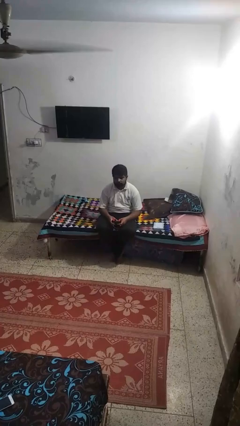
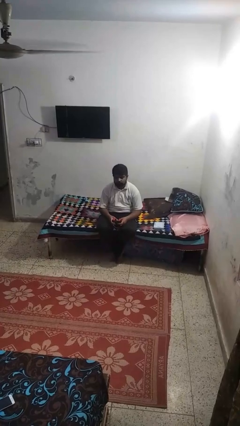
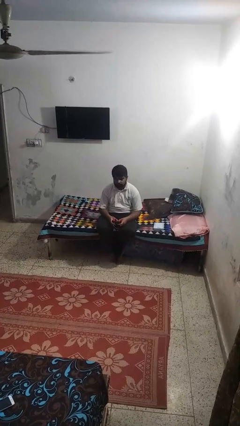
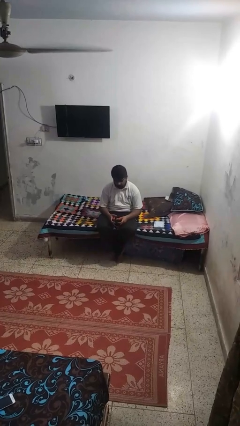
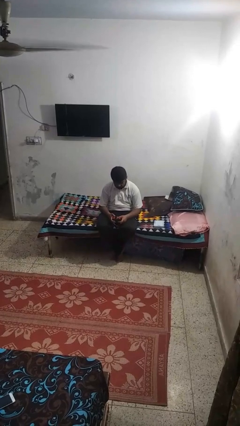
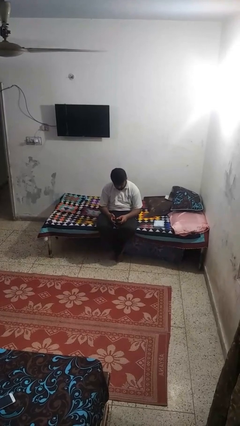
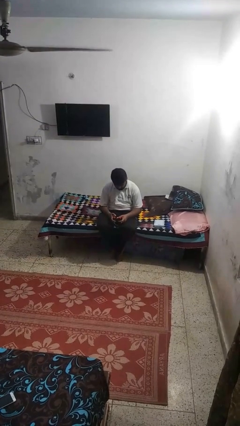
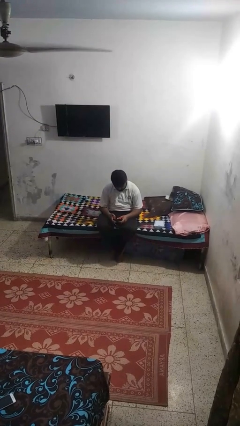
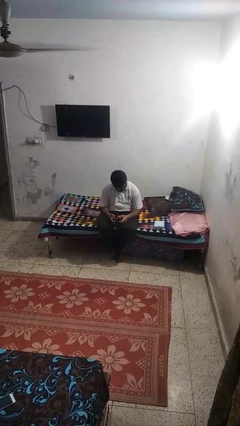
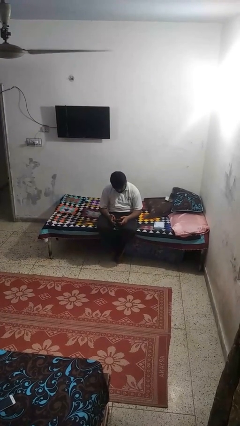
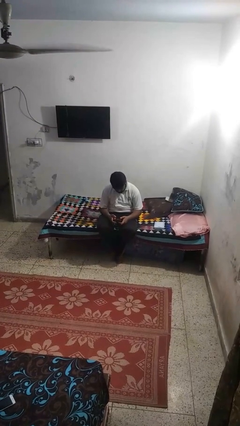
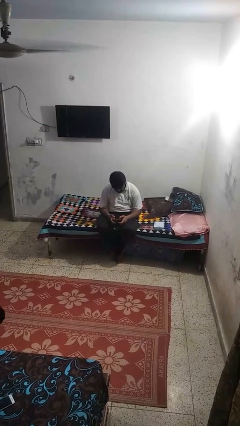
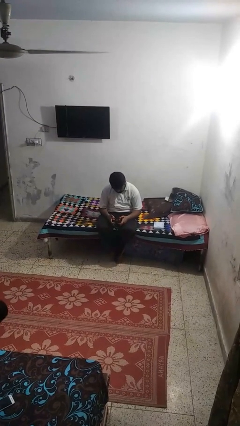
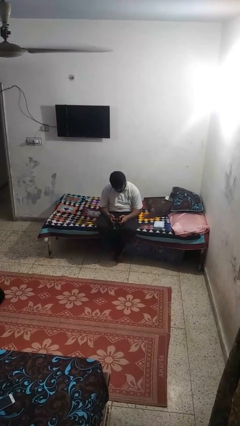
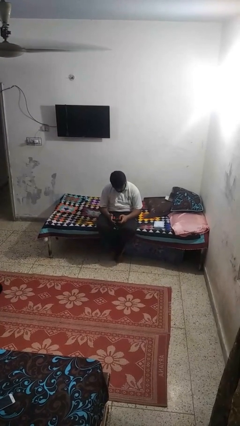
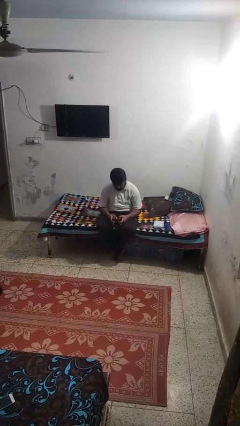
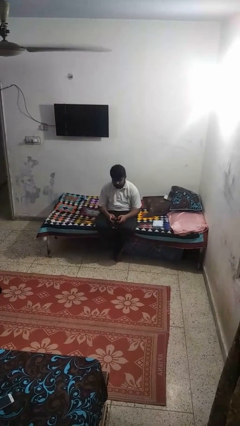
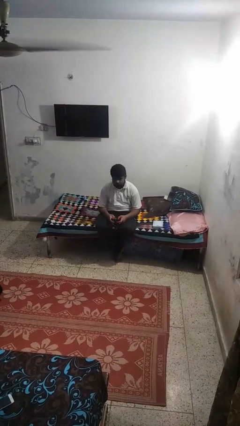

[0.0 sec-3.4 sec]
person interacts with handheld game

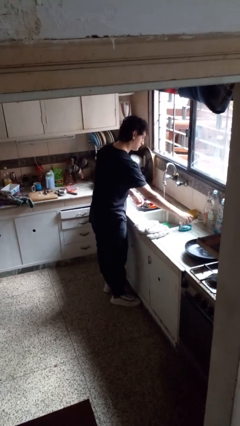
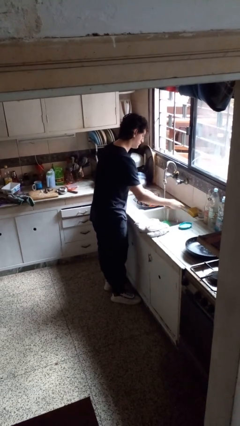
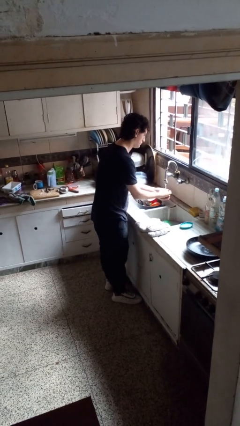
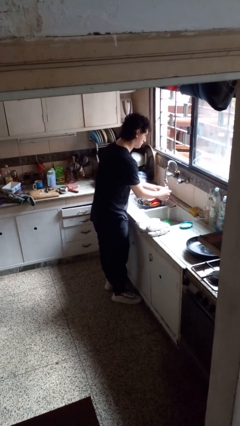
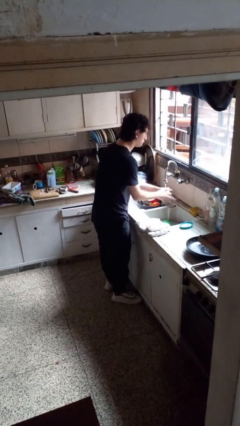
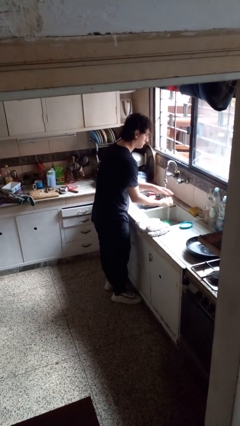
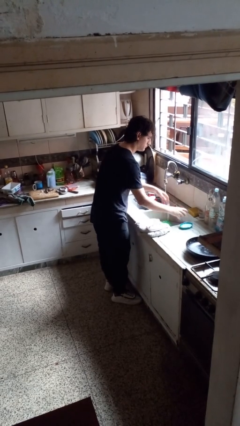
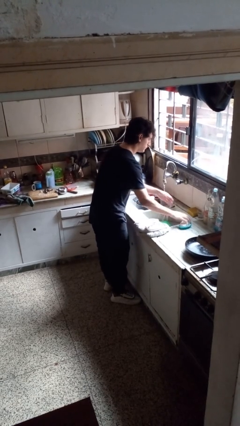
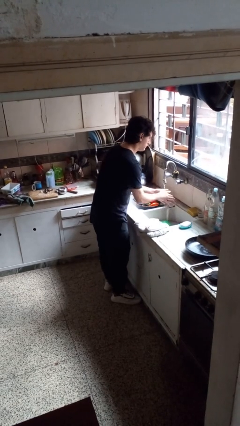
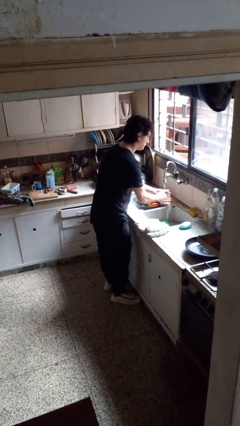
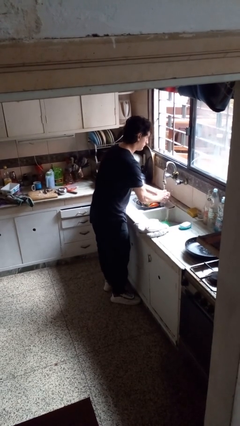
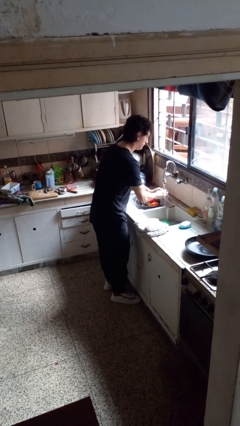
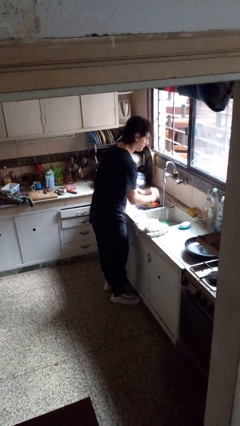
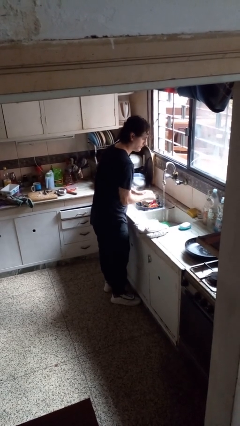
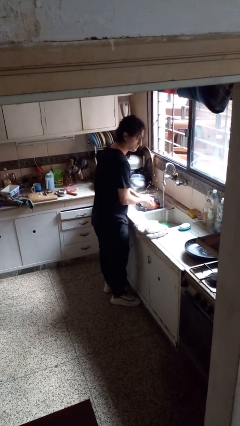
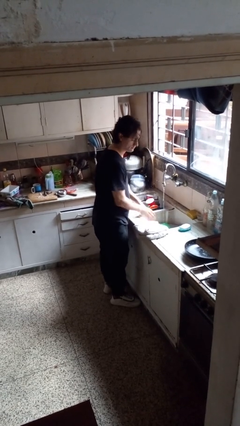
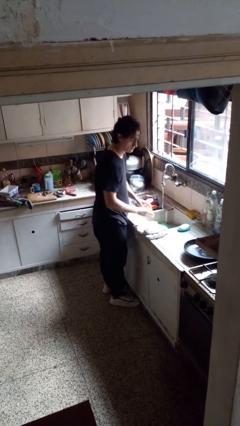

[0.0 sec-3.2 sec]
person washes hands

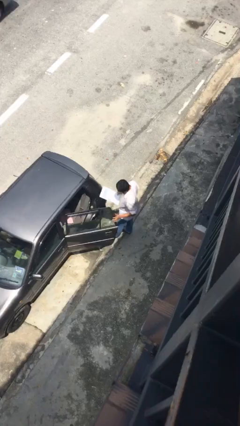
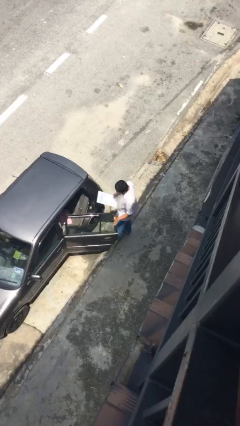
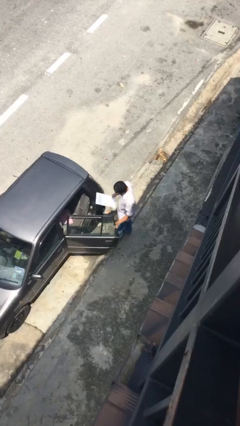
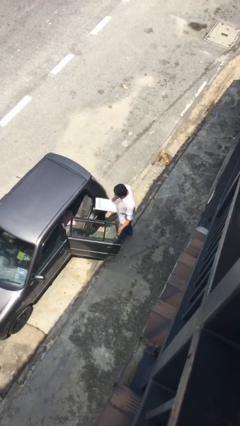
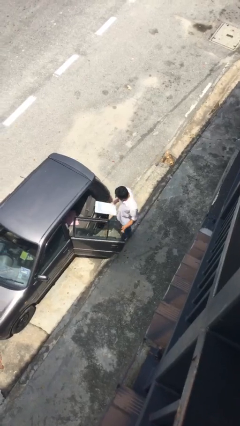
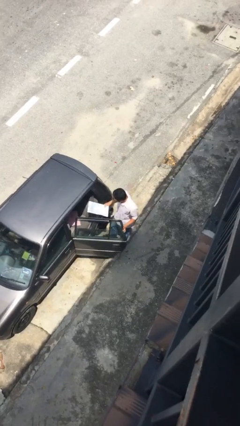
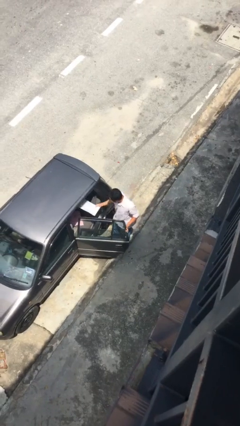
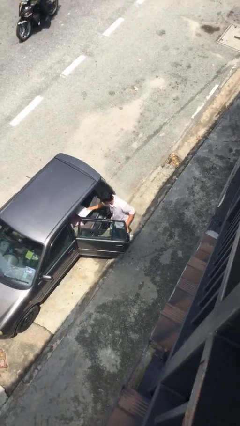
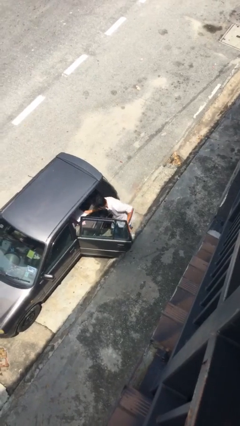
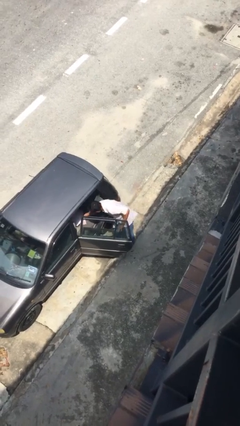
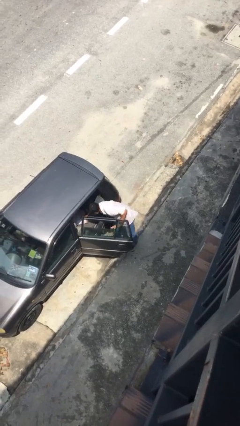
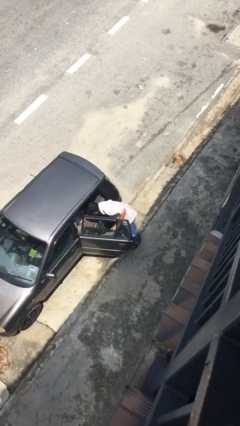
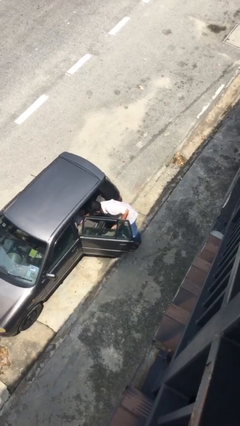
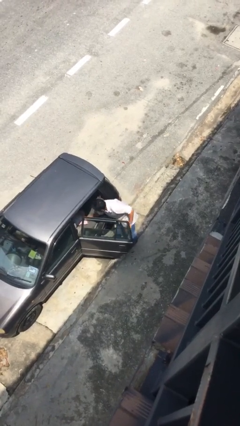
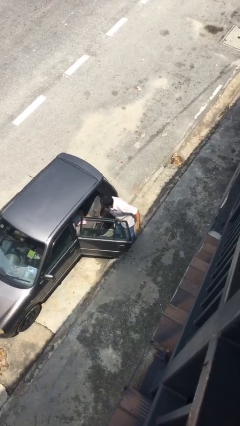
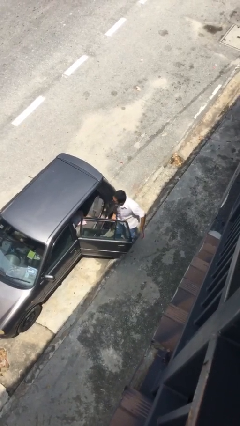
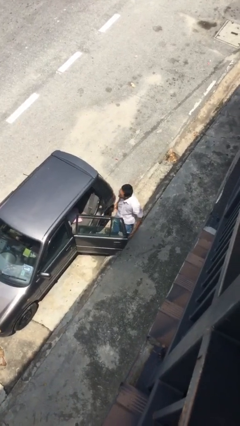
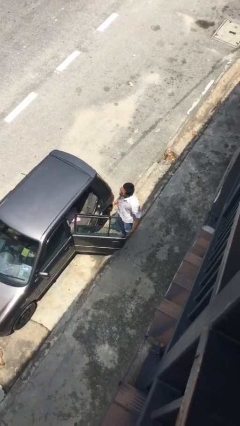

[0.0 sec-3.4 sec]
person loads car

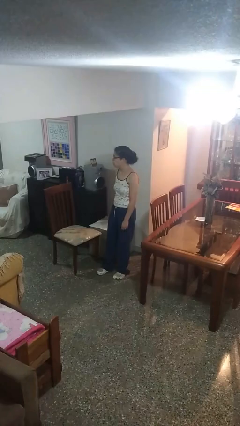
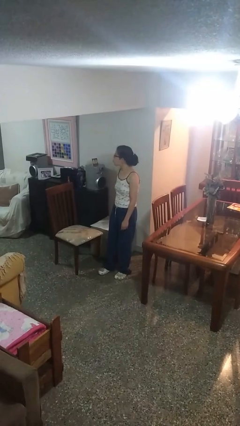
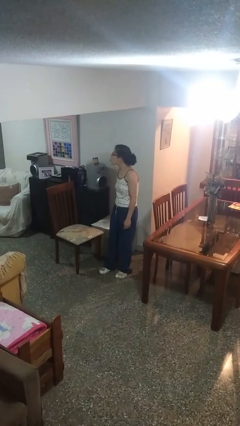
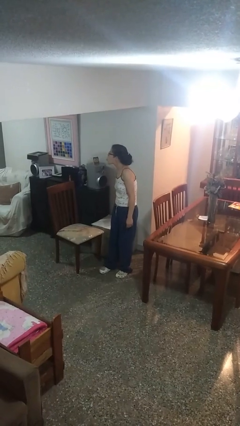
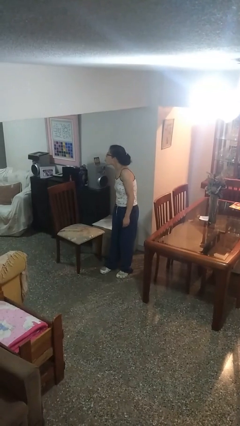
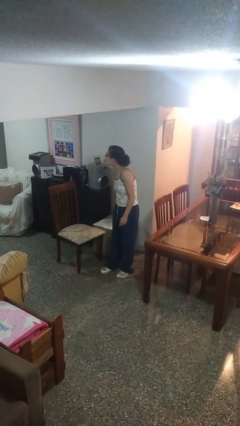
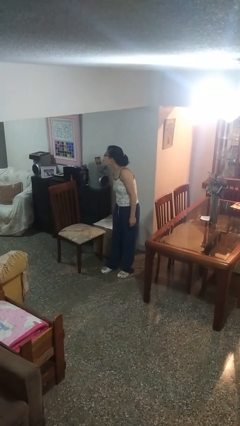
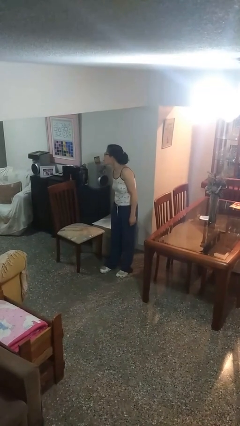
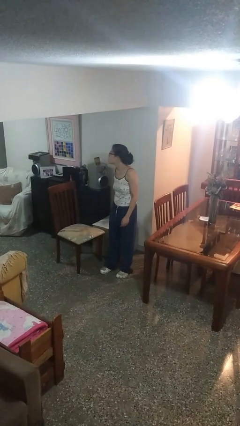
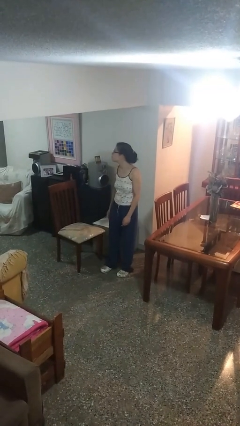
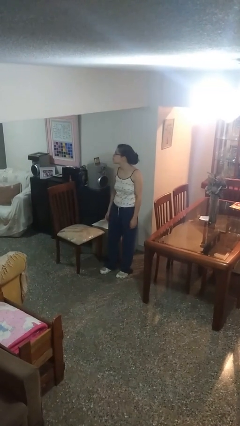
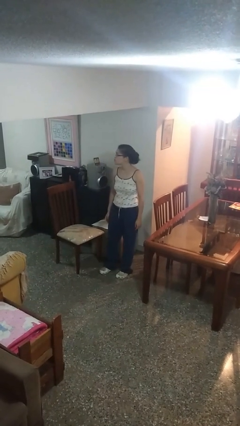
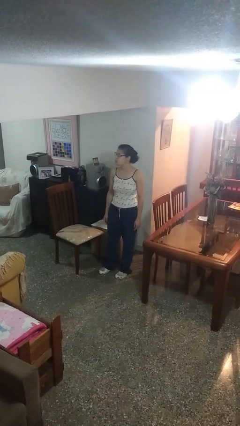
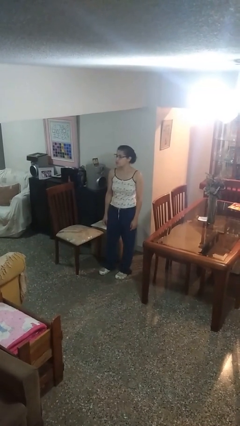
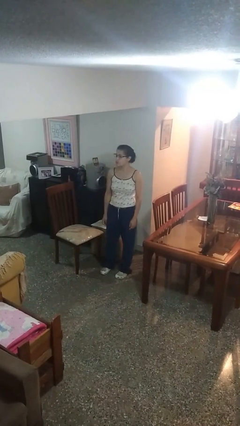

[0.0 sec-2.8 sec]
person sticks out tongue

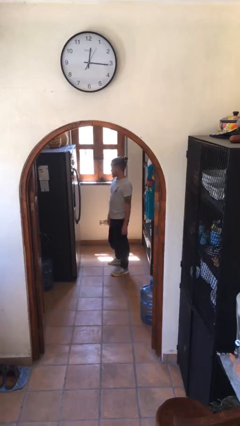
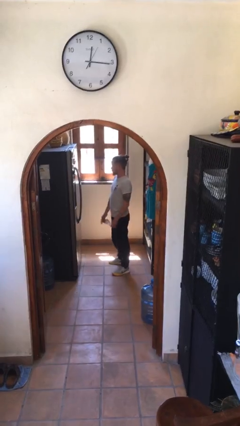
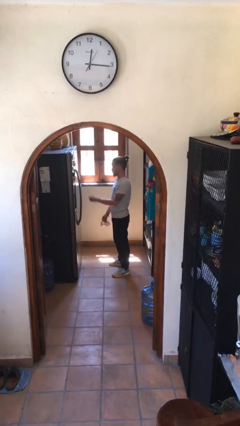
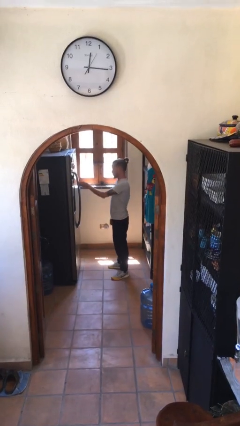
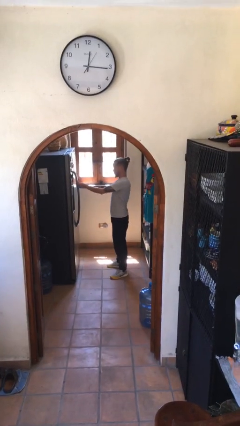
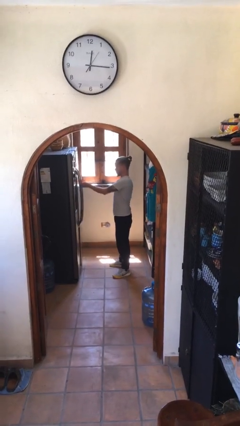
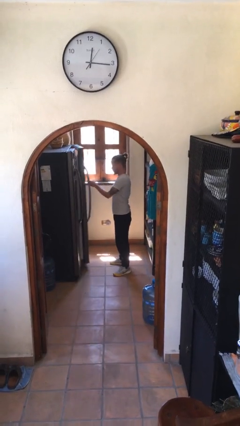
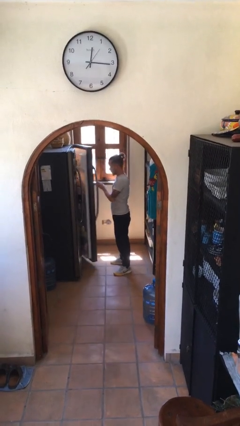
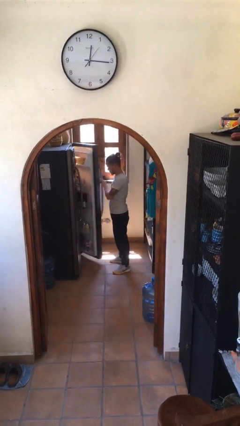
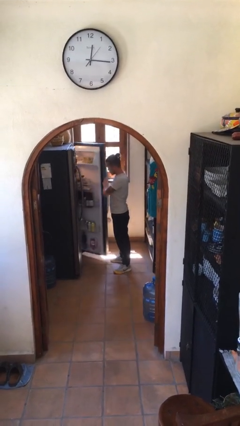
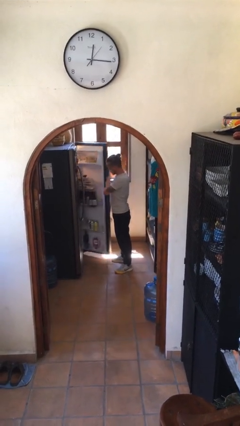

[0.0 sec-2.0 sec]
person opens refrigerator

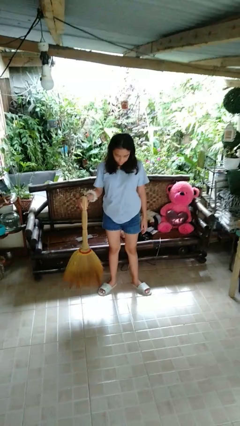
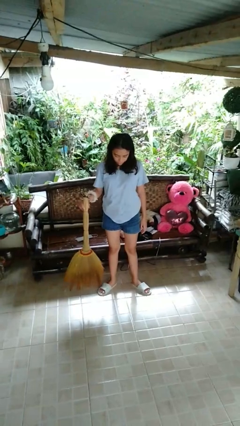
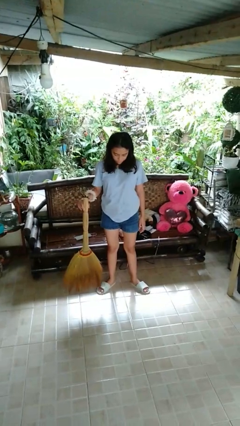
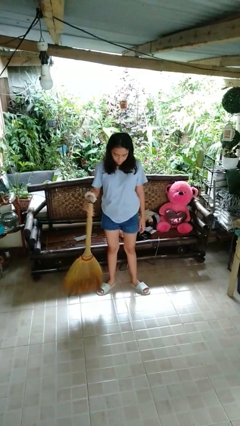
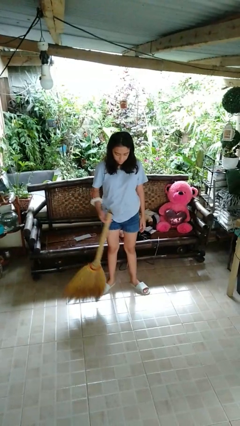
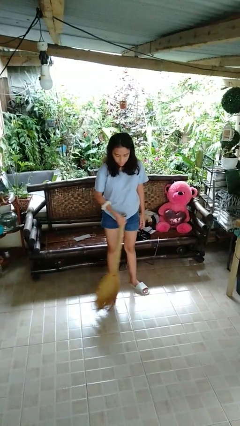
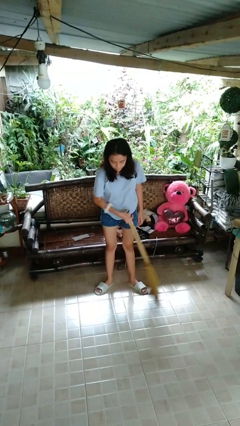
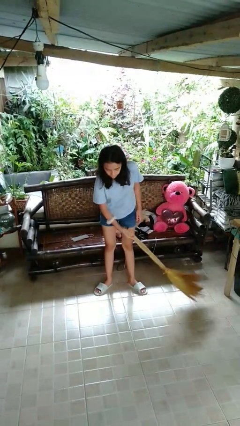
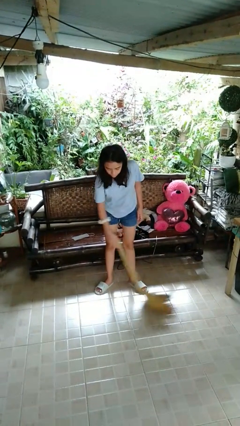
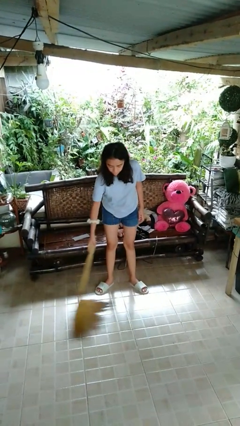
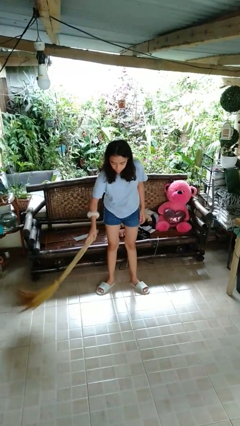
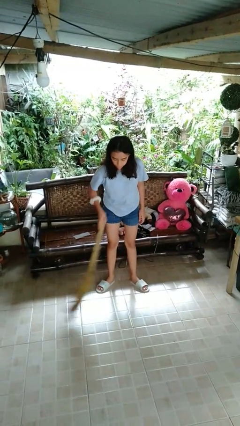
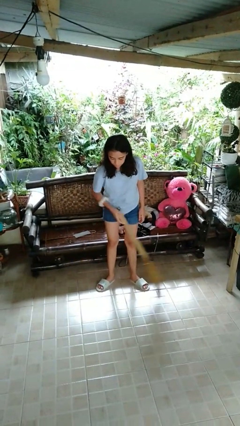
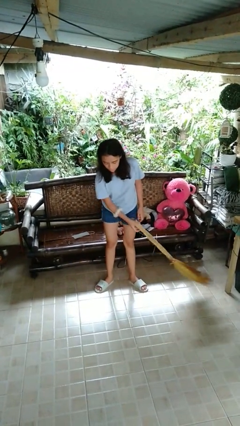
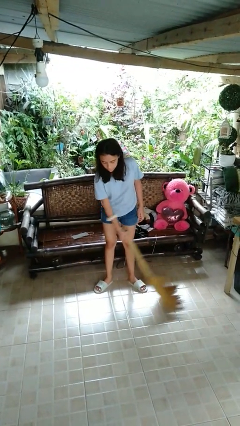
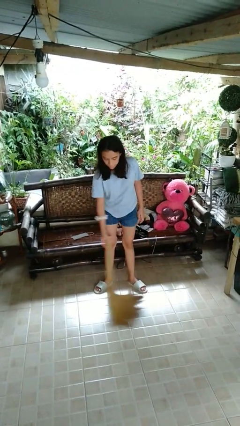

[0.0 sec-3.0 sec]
person sweeps floor
